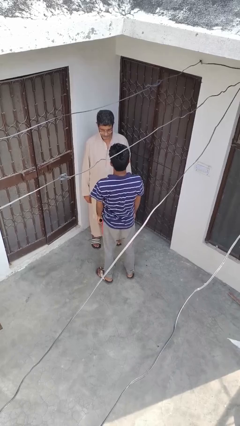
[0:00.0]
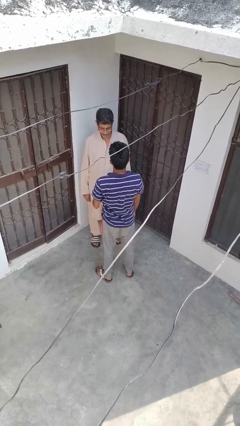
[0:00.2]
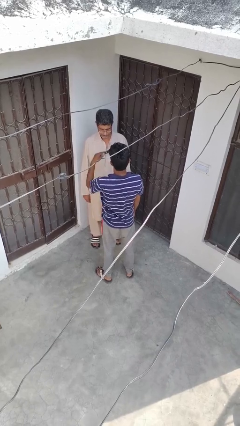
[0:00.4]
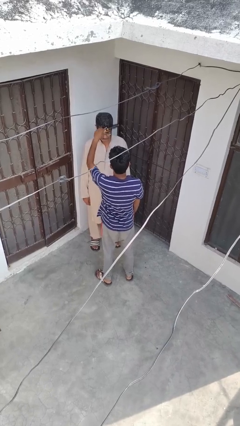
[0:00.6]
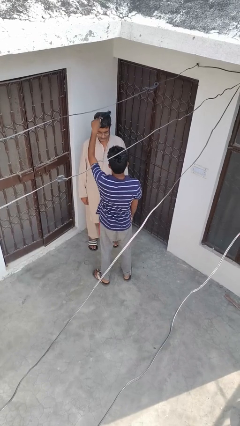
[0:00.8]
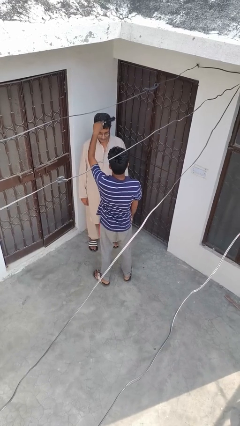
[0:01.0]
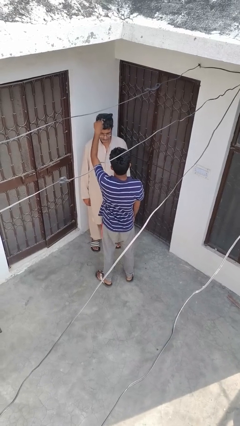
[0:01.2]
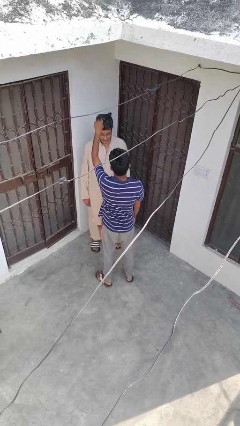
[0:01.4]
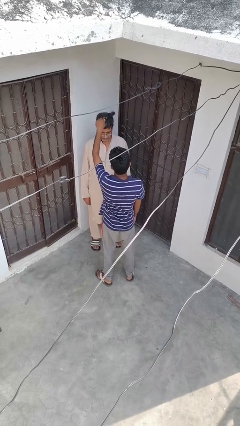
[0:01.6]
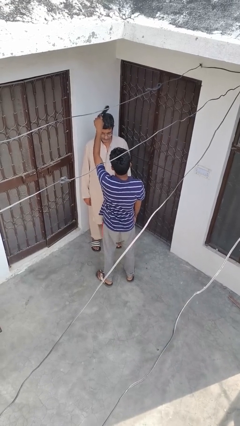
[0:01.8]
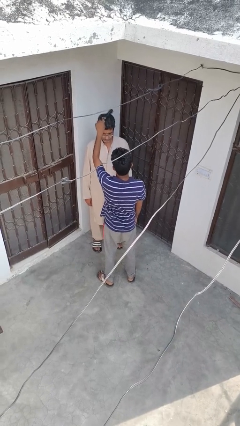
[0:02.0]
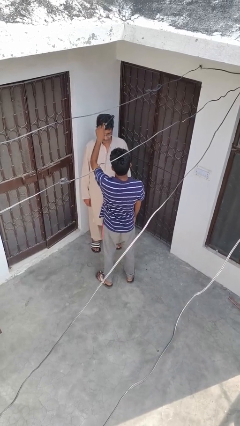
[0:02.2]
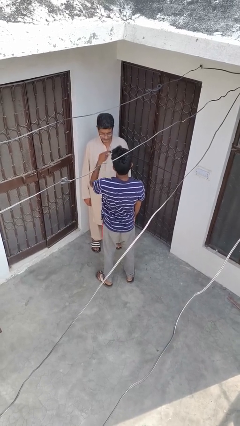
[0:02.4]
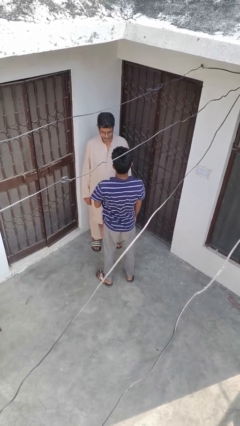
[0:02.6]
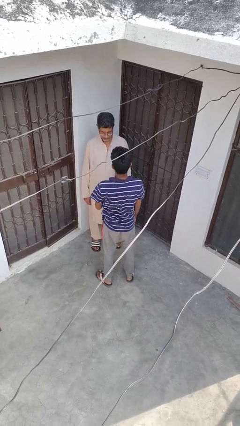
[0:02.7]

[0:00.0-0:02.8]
person brushes hair of person

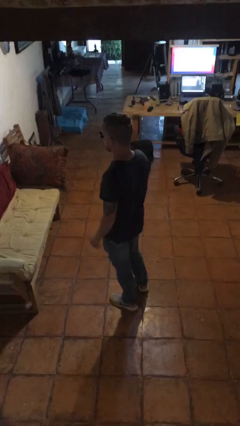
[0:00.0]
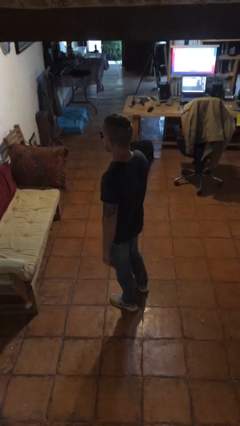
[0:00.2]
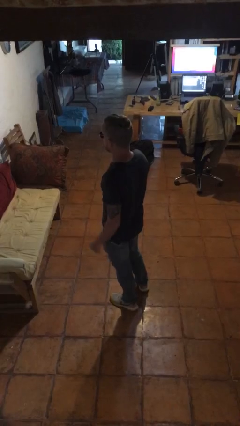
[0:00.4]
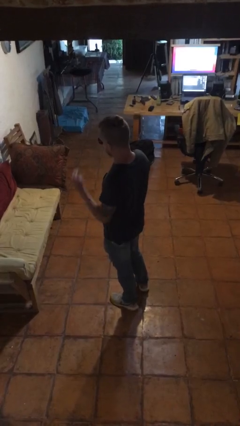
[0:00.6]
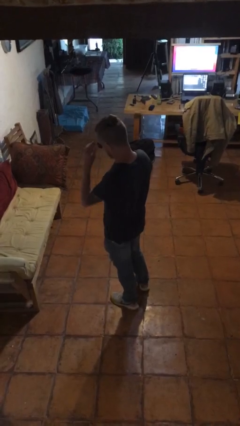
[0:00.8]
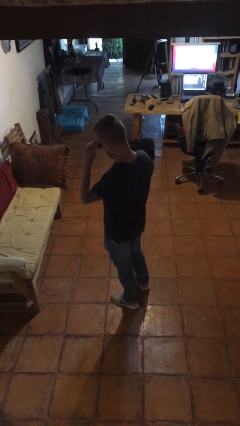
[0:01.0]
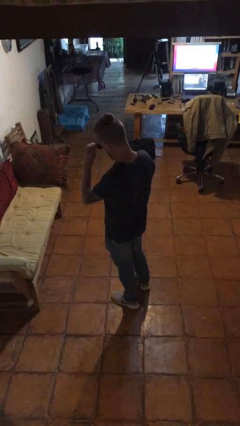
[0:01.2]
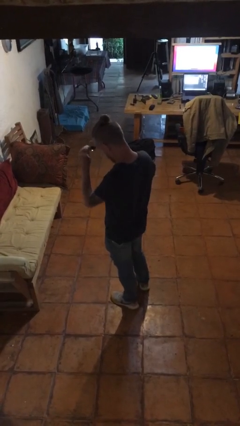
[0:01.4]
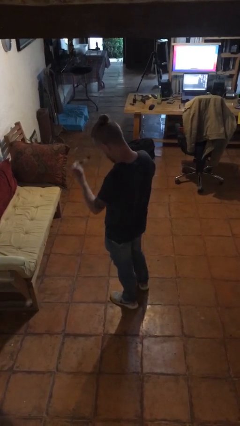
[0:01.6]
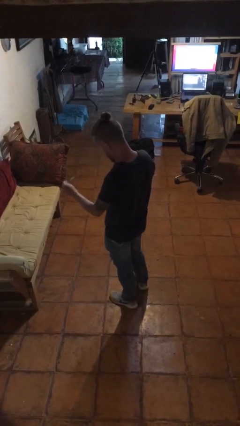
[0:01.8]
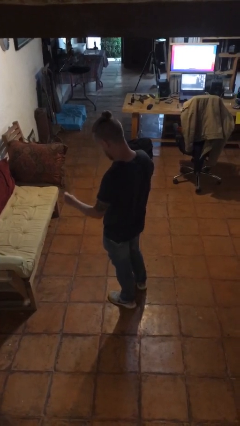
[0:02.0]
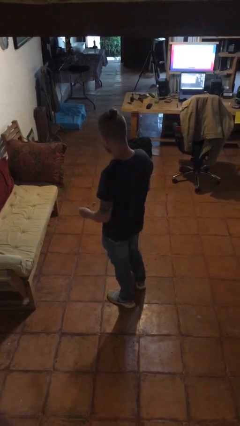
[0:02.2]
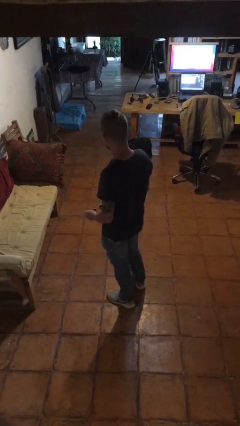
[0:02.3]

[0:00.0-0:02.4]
person takes off sunglasses

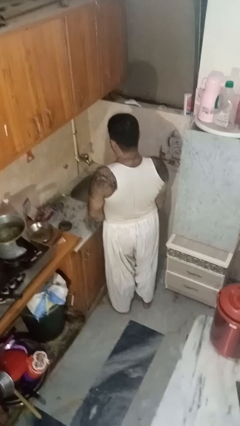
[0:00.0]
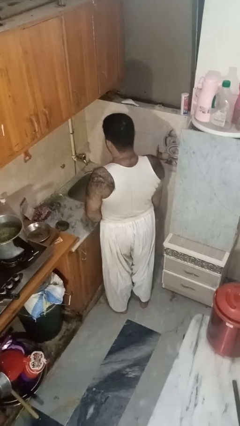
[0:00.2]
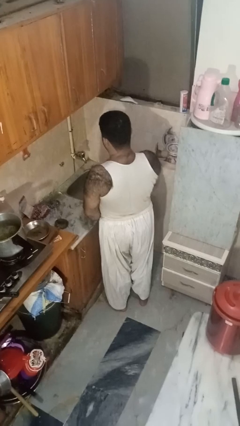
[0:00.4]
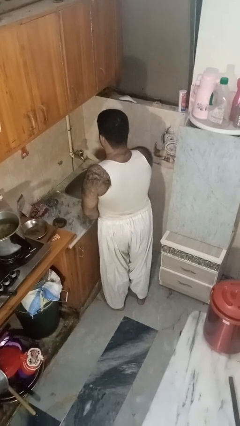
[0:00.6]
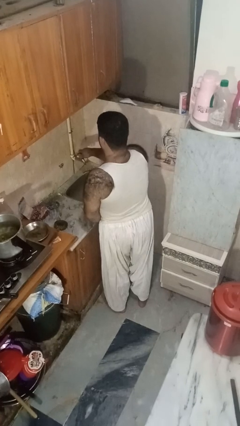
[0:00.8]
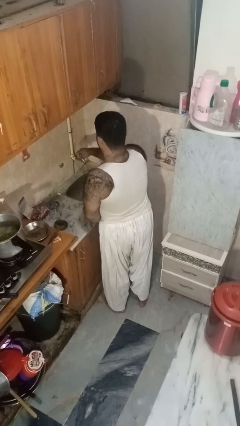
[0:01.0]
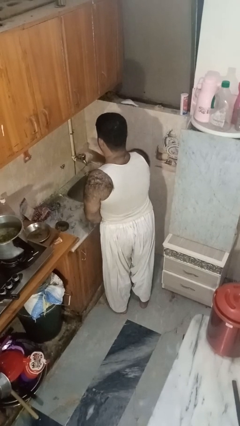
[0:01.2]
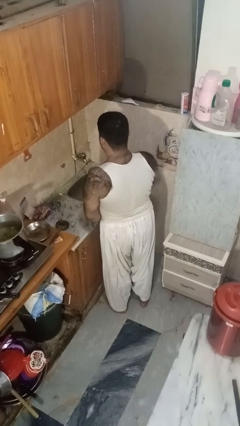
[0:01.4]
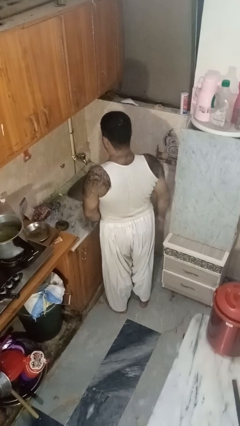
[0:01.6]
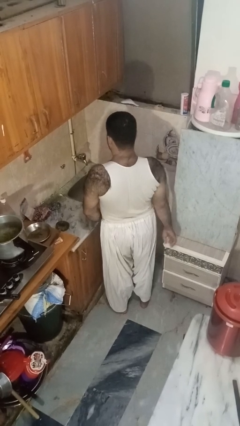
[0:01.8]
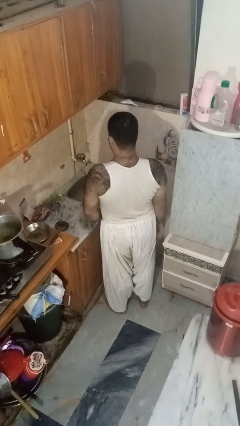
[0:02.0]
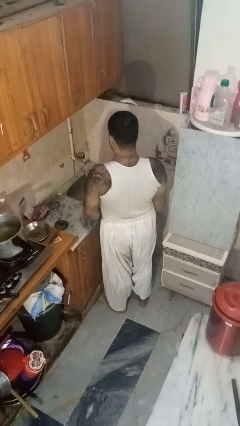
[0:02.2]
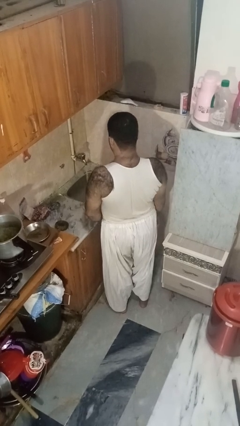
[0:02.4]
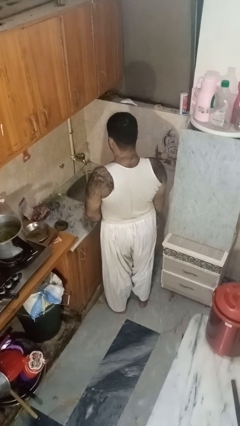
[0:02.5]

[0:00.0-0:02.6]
person turns on faucet

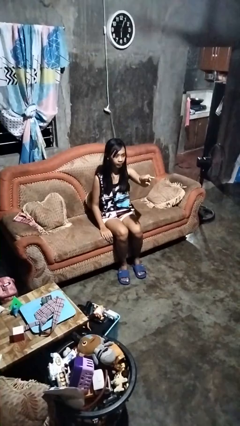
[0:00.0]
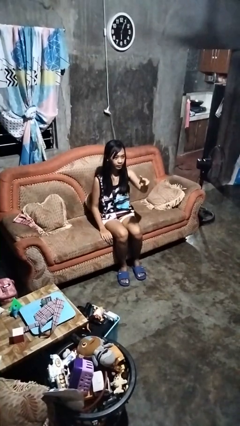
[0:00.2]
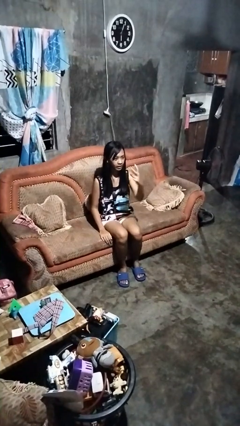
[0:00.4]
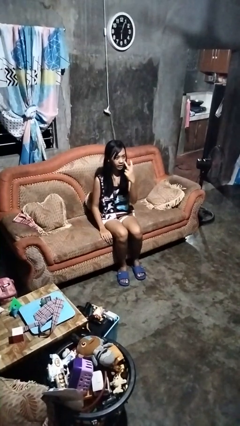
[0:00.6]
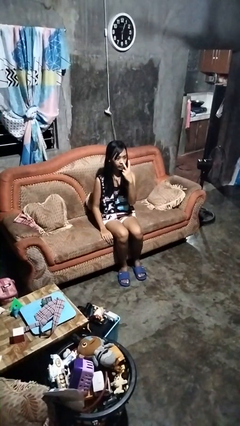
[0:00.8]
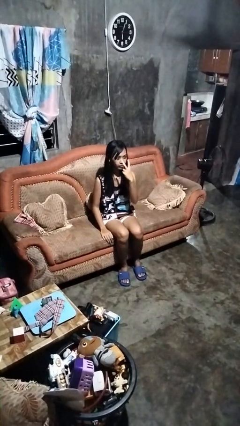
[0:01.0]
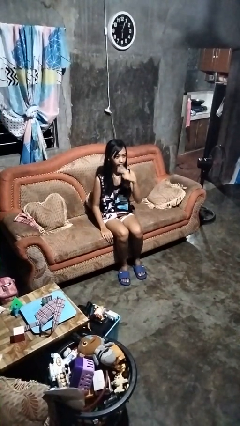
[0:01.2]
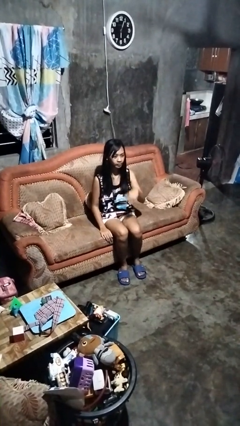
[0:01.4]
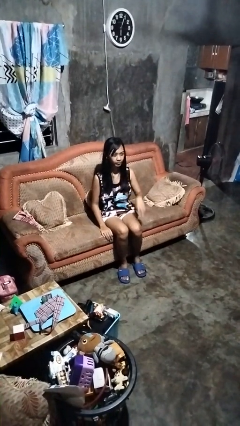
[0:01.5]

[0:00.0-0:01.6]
person gestures watch closely

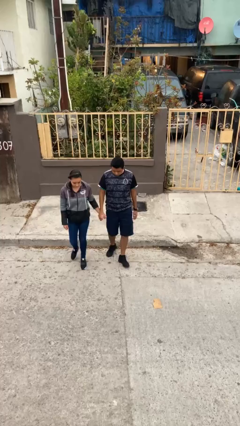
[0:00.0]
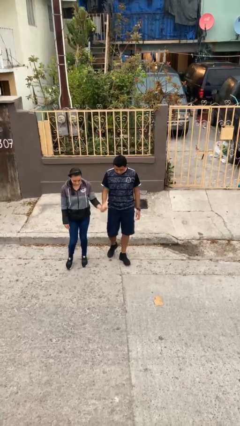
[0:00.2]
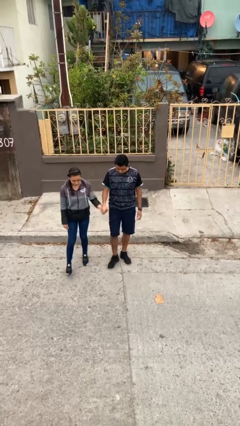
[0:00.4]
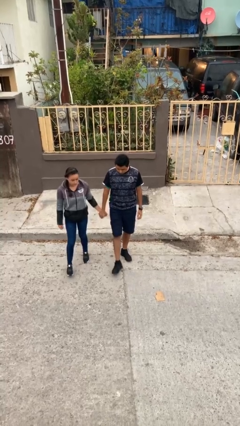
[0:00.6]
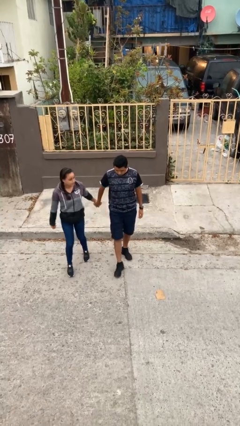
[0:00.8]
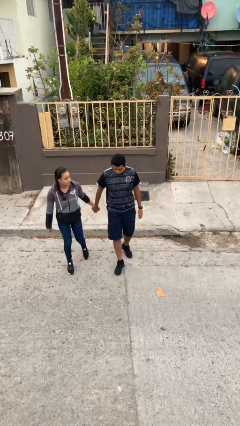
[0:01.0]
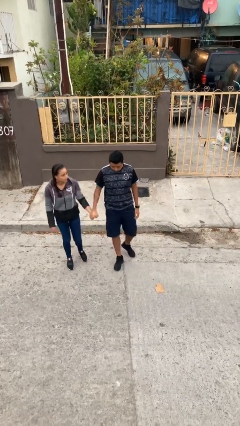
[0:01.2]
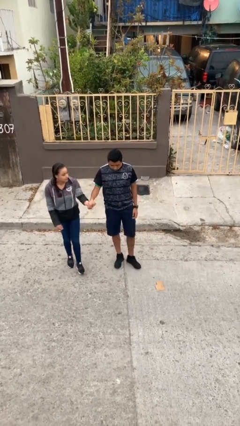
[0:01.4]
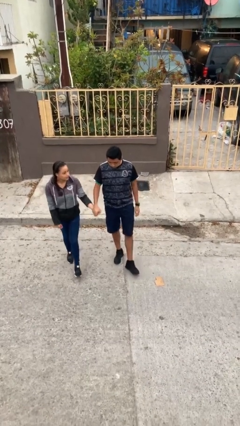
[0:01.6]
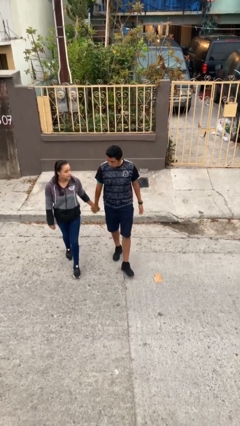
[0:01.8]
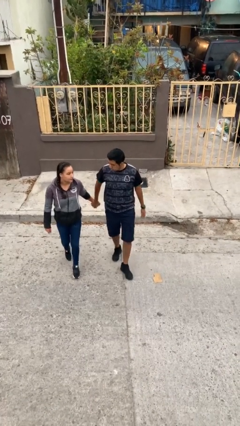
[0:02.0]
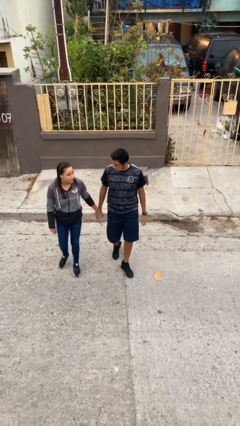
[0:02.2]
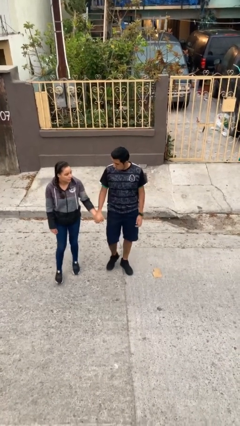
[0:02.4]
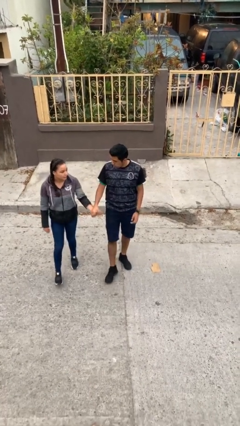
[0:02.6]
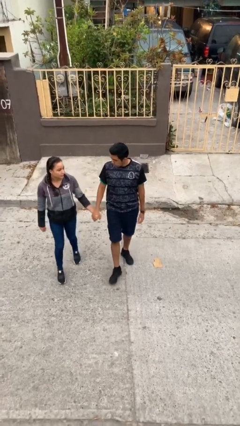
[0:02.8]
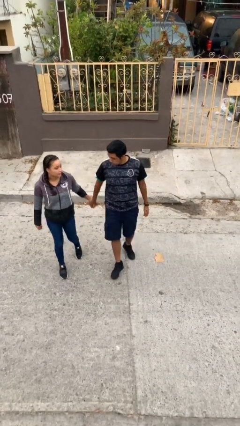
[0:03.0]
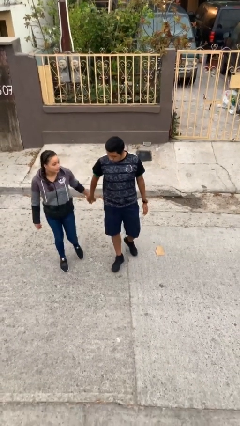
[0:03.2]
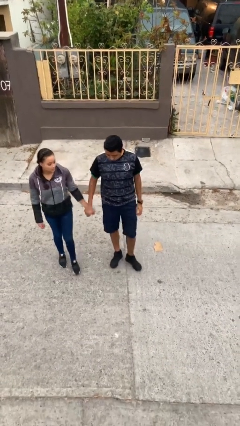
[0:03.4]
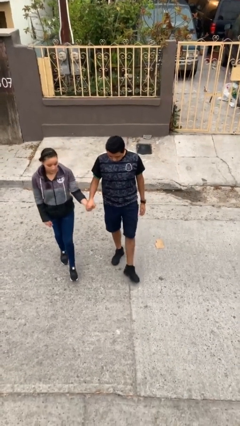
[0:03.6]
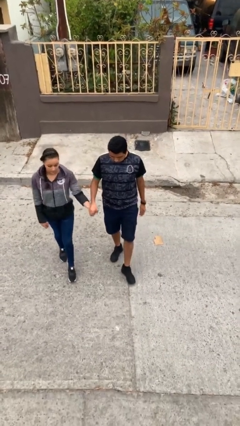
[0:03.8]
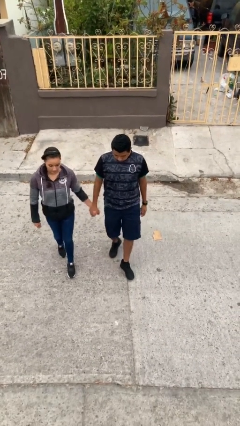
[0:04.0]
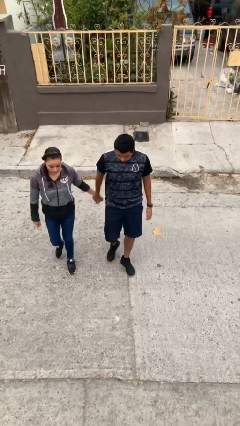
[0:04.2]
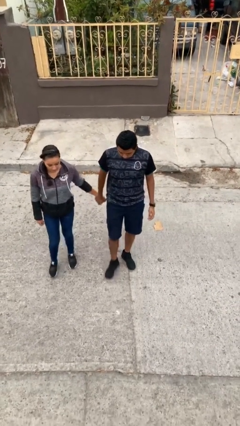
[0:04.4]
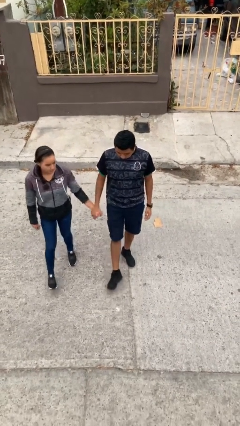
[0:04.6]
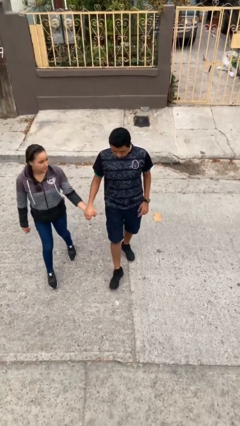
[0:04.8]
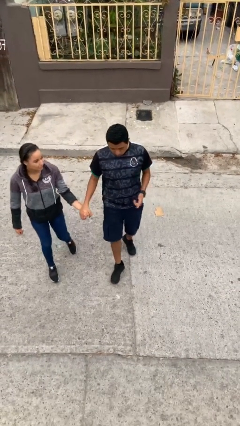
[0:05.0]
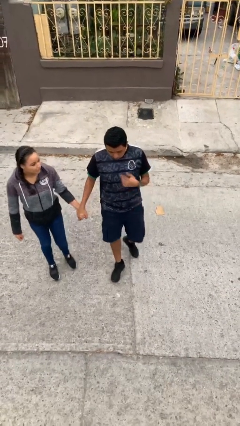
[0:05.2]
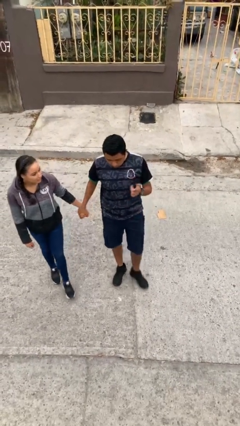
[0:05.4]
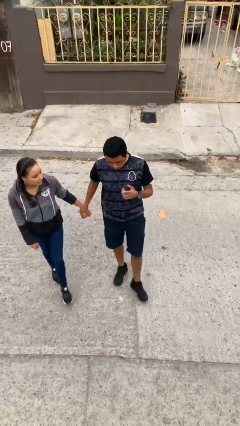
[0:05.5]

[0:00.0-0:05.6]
person holds hand

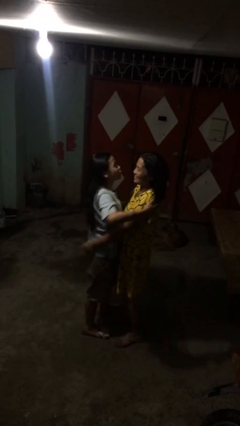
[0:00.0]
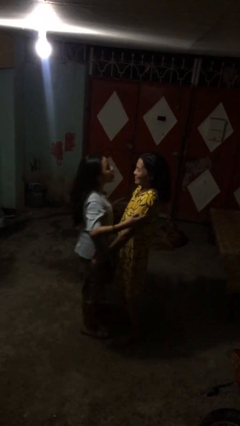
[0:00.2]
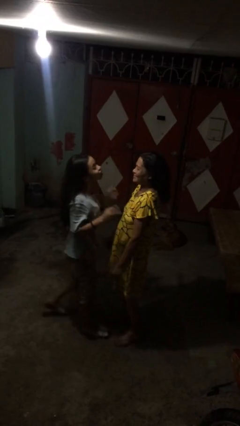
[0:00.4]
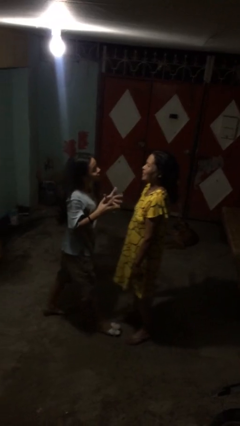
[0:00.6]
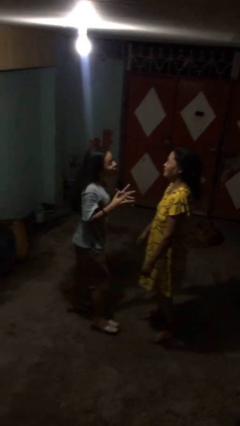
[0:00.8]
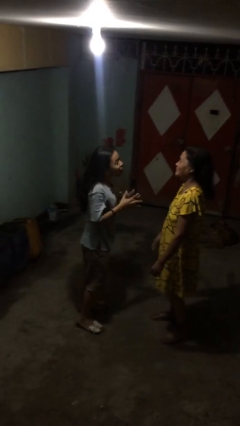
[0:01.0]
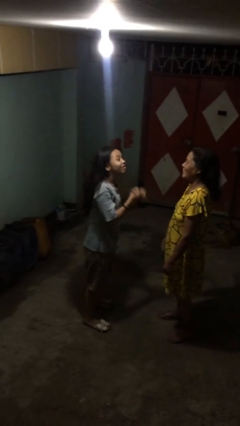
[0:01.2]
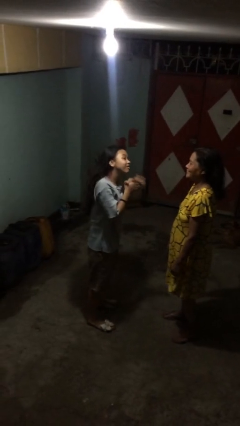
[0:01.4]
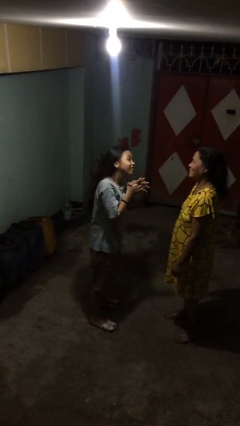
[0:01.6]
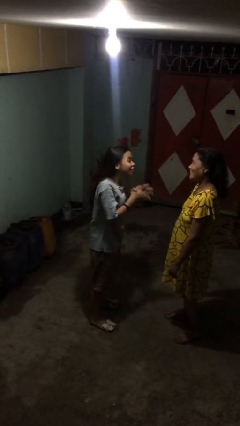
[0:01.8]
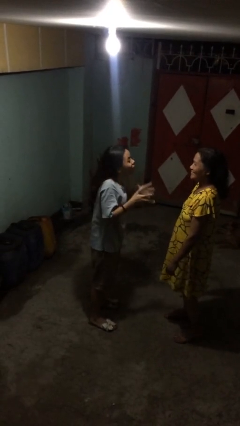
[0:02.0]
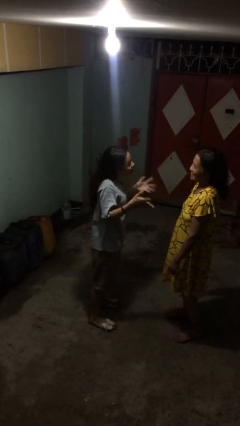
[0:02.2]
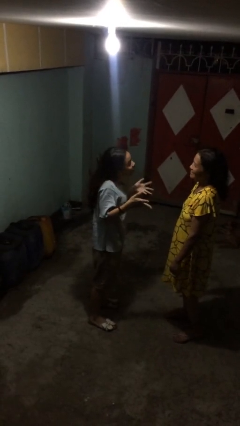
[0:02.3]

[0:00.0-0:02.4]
person talks to person
